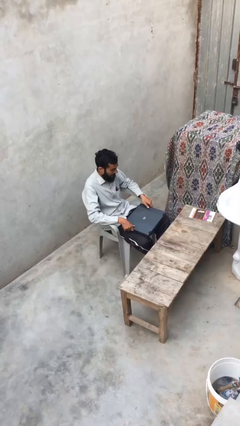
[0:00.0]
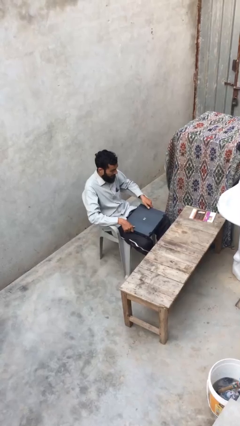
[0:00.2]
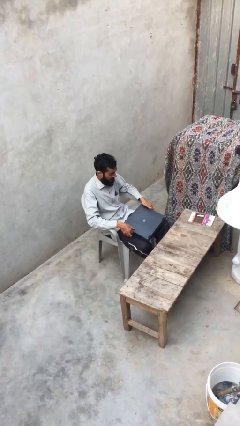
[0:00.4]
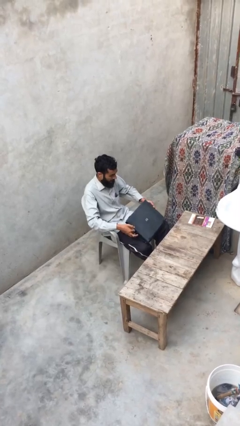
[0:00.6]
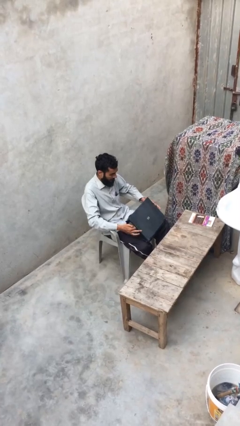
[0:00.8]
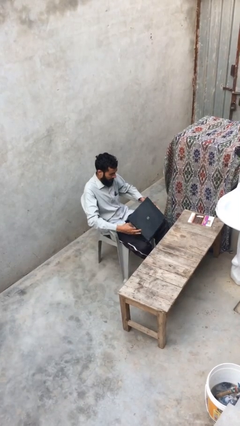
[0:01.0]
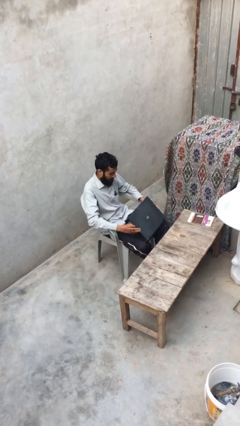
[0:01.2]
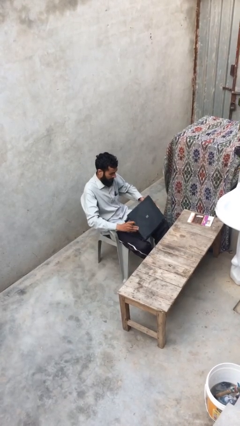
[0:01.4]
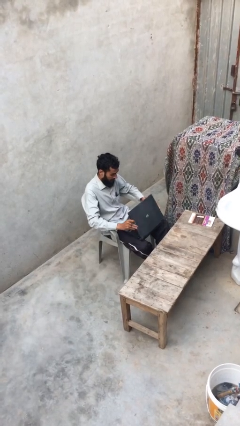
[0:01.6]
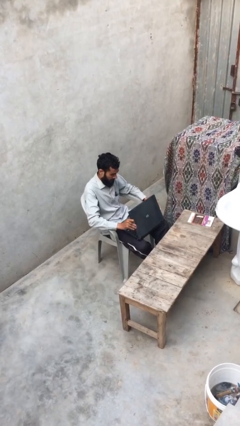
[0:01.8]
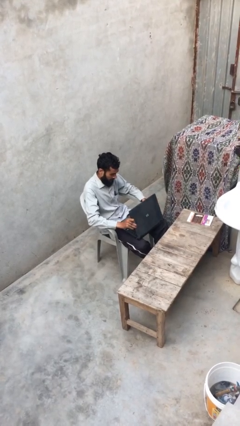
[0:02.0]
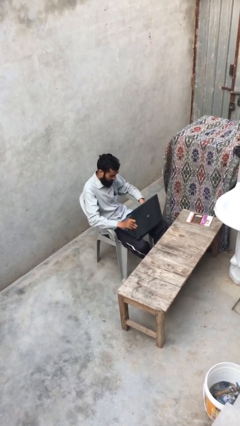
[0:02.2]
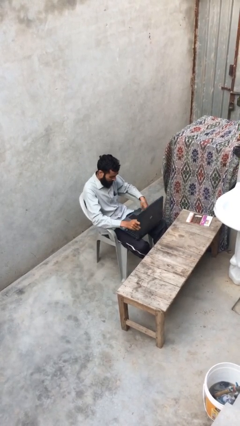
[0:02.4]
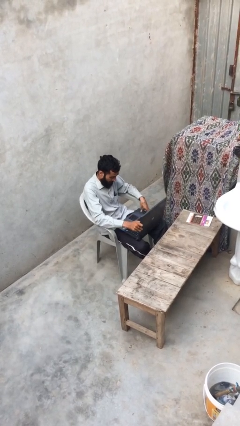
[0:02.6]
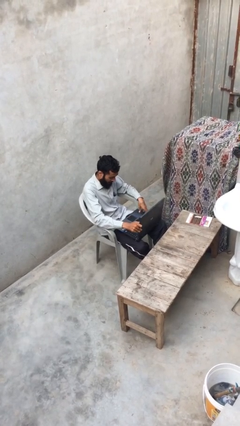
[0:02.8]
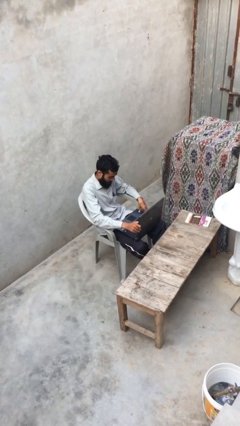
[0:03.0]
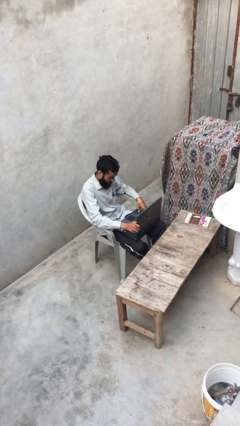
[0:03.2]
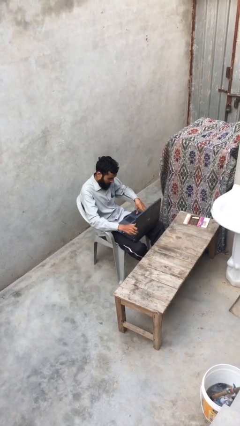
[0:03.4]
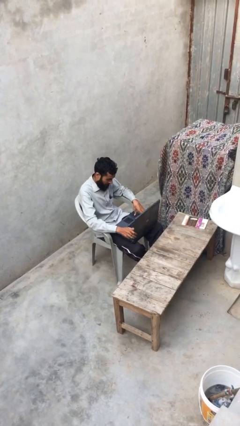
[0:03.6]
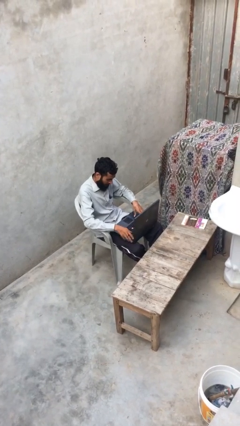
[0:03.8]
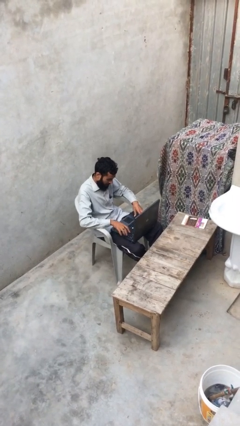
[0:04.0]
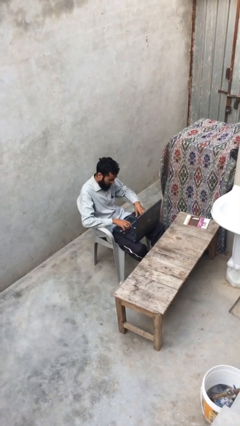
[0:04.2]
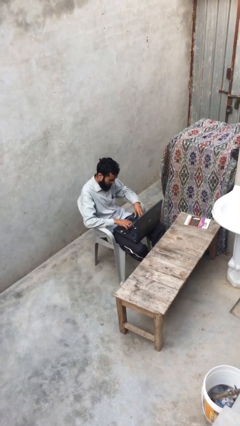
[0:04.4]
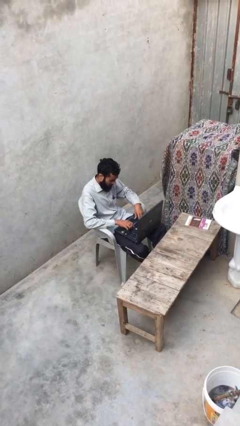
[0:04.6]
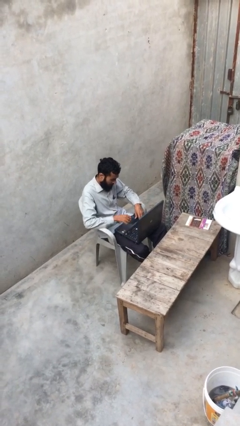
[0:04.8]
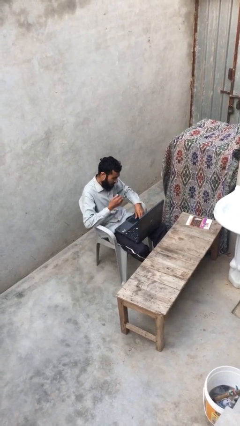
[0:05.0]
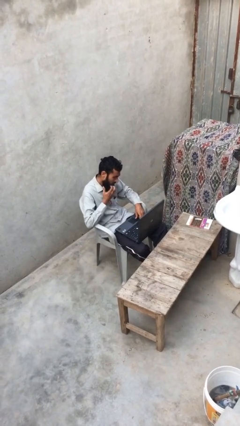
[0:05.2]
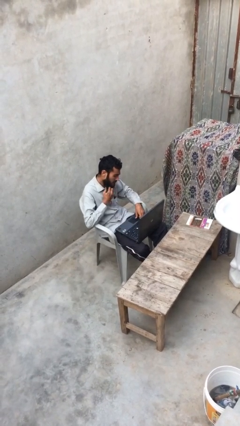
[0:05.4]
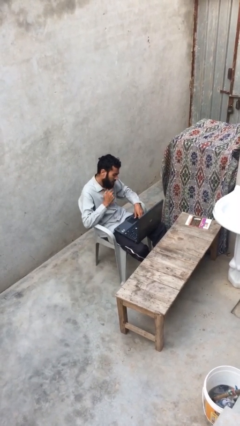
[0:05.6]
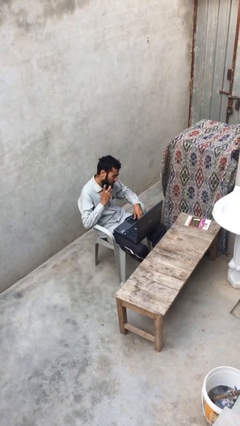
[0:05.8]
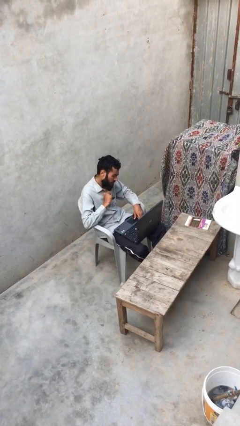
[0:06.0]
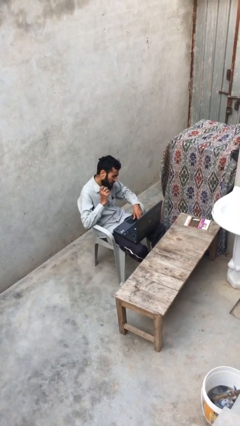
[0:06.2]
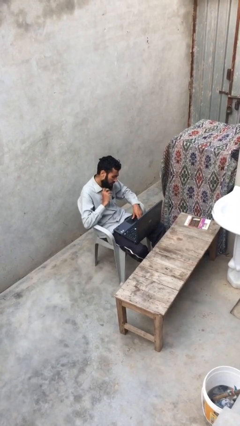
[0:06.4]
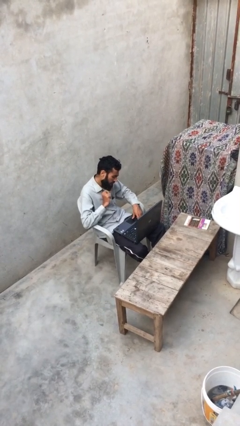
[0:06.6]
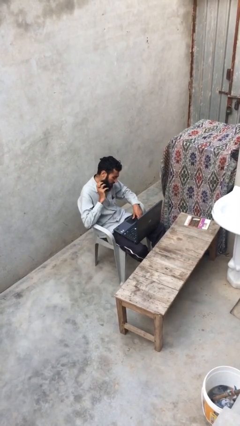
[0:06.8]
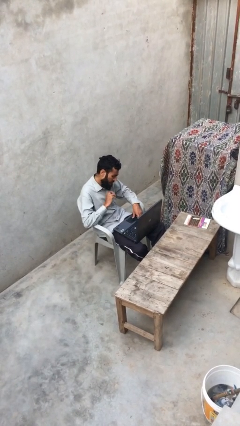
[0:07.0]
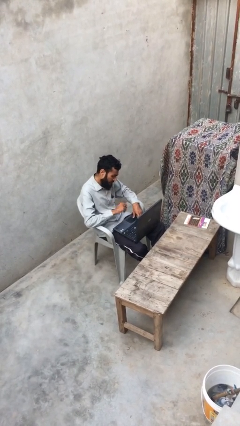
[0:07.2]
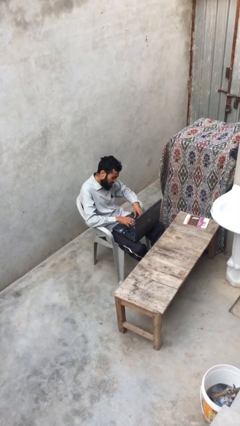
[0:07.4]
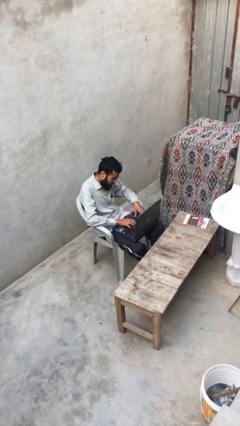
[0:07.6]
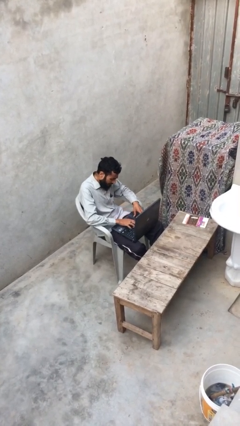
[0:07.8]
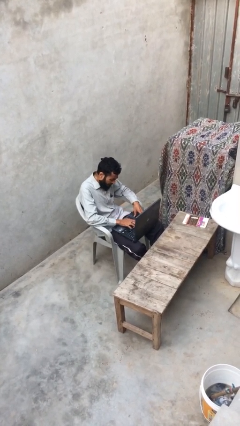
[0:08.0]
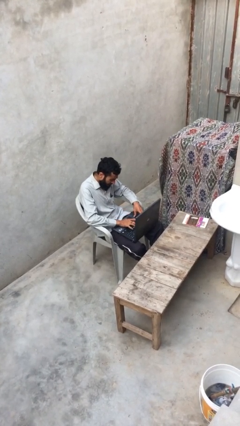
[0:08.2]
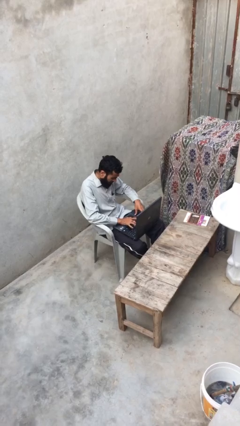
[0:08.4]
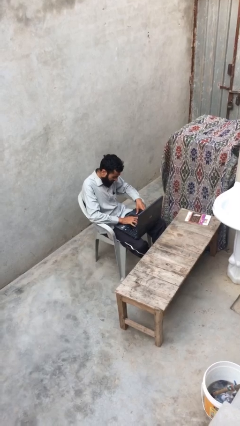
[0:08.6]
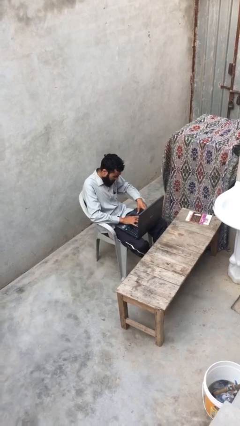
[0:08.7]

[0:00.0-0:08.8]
person interacts with laptop

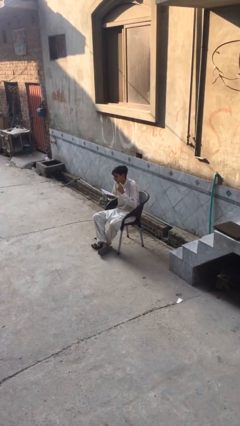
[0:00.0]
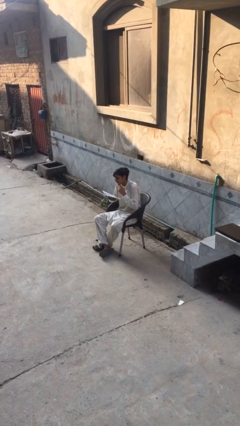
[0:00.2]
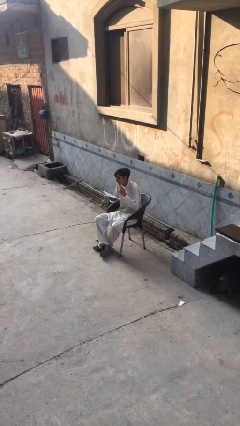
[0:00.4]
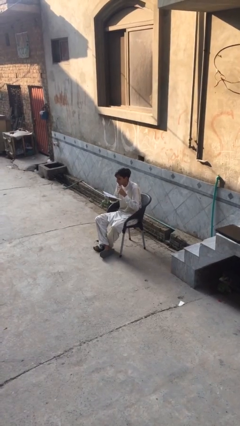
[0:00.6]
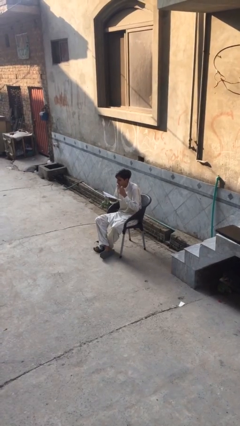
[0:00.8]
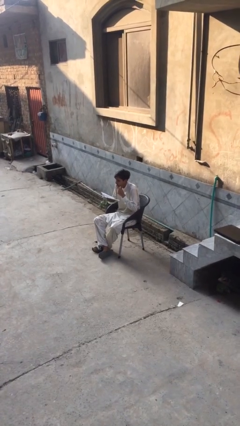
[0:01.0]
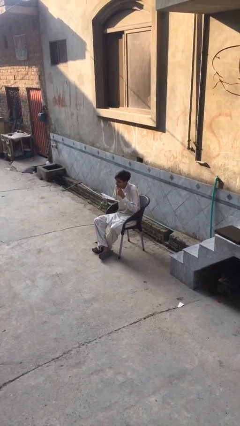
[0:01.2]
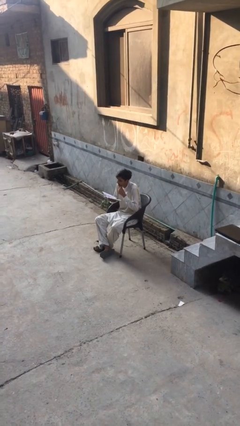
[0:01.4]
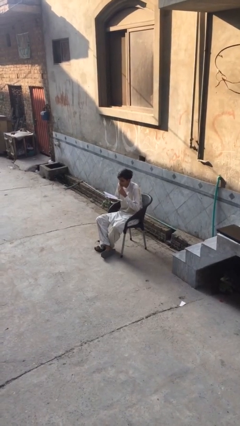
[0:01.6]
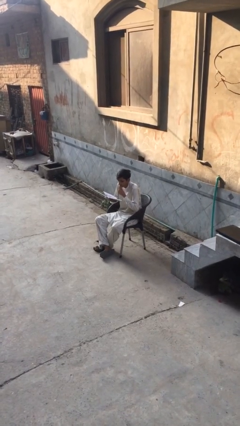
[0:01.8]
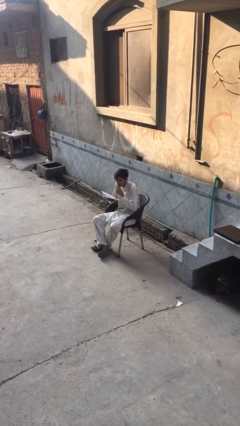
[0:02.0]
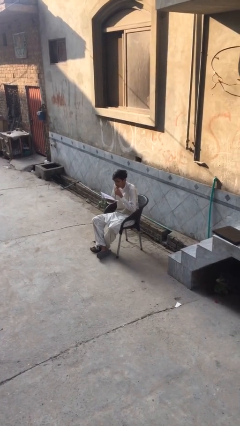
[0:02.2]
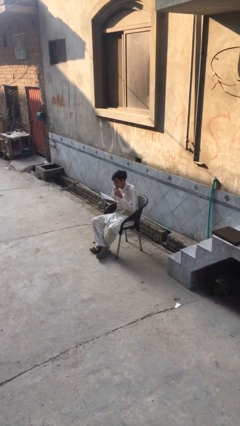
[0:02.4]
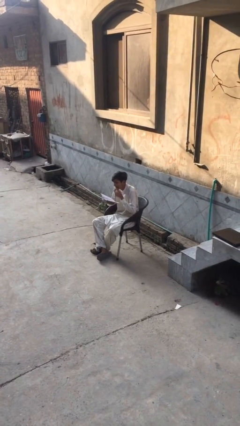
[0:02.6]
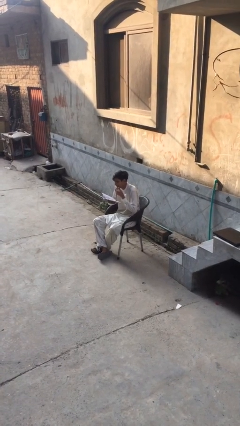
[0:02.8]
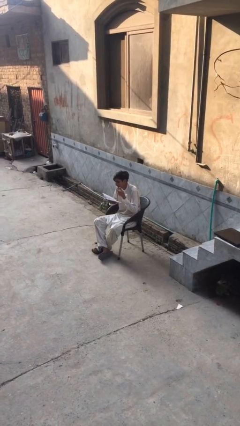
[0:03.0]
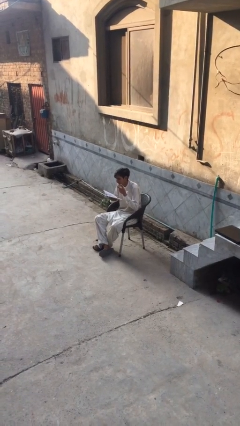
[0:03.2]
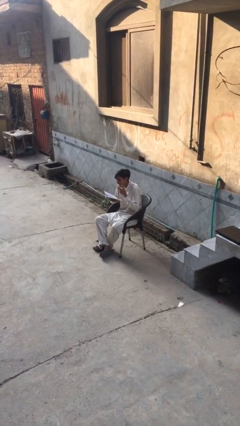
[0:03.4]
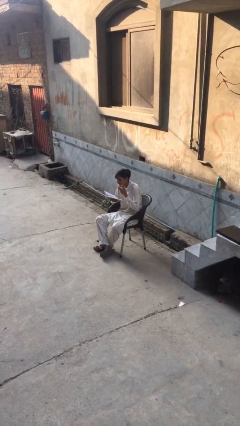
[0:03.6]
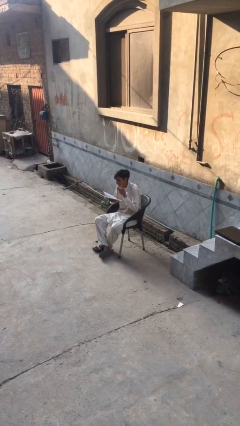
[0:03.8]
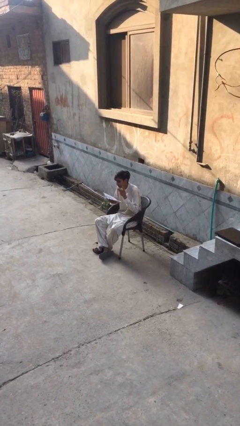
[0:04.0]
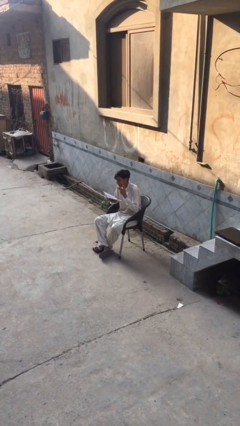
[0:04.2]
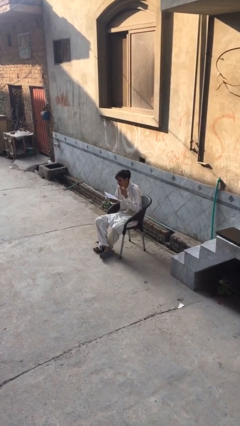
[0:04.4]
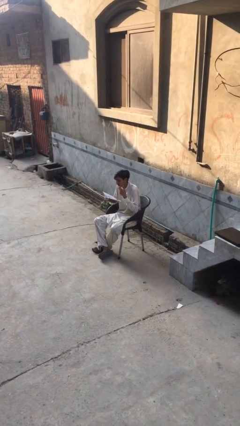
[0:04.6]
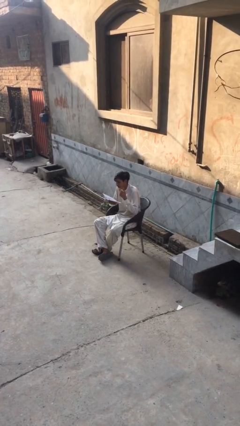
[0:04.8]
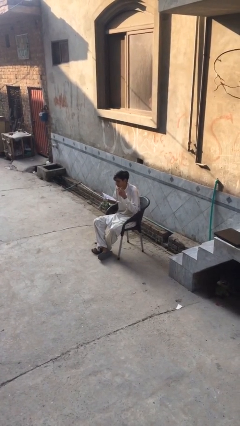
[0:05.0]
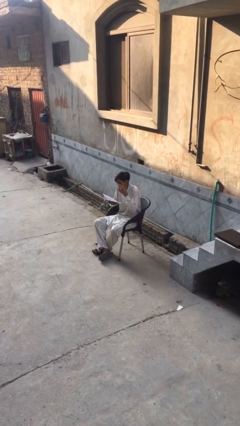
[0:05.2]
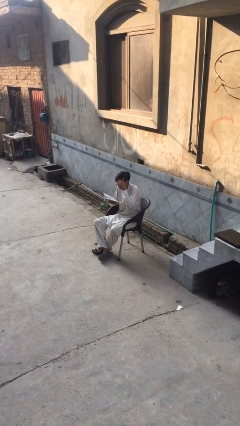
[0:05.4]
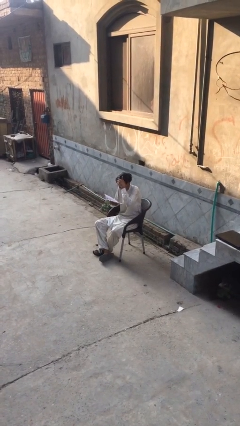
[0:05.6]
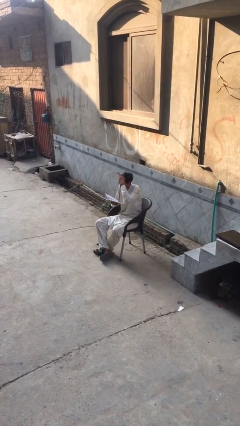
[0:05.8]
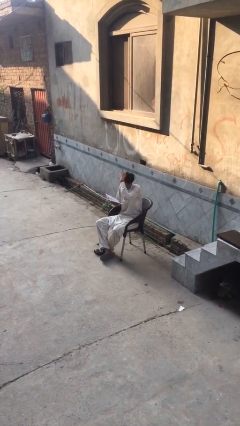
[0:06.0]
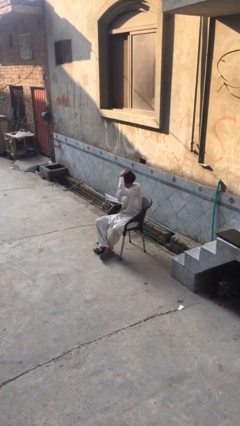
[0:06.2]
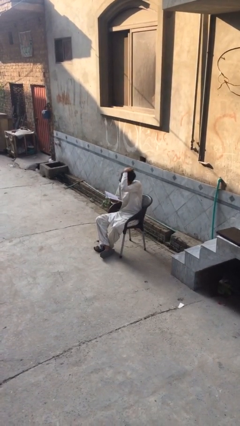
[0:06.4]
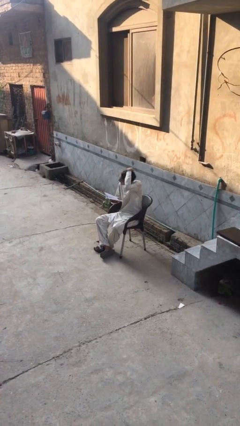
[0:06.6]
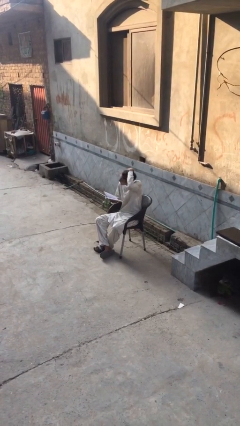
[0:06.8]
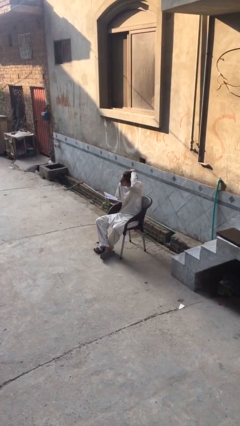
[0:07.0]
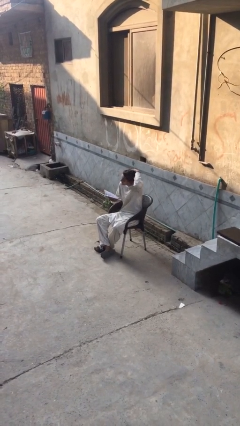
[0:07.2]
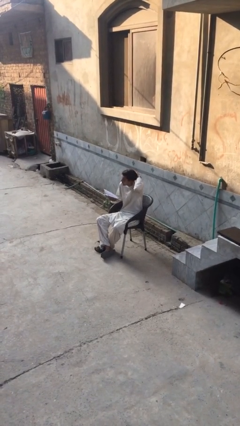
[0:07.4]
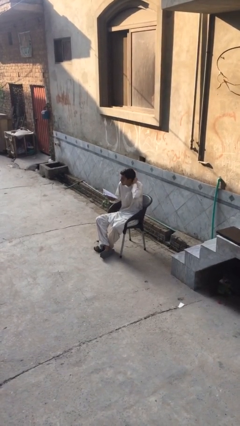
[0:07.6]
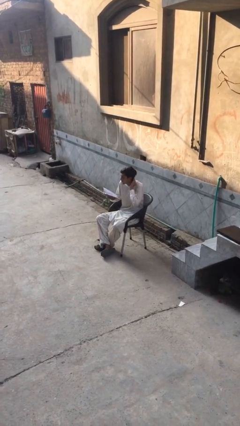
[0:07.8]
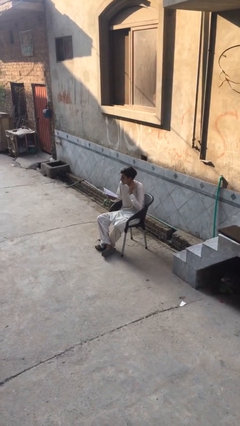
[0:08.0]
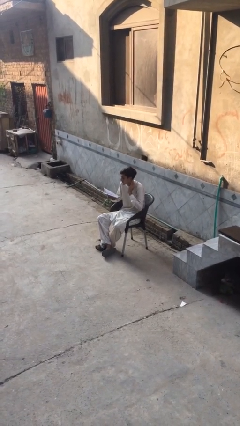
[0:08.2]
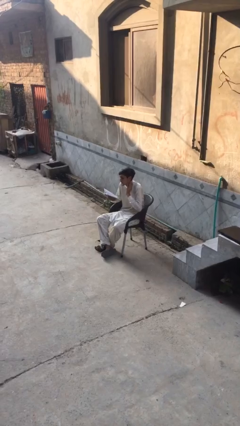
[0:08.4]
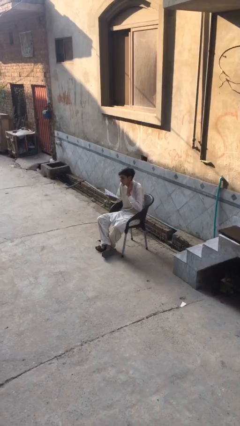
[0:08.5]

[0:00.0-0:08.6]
person reads document

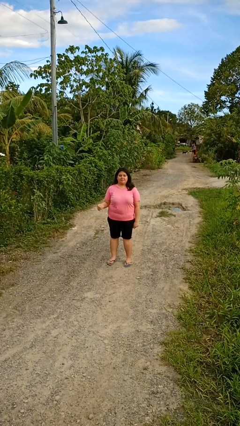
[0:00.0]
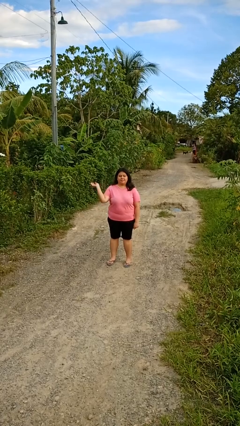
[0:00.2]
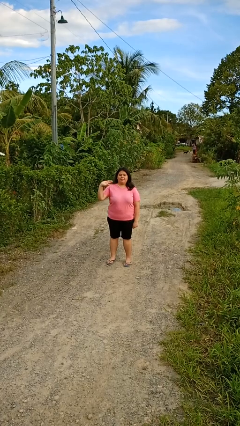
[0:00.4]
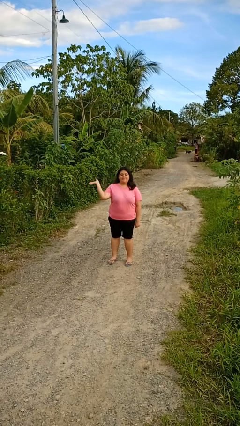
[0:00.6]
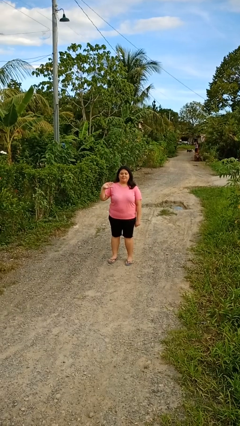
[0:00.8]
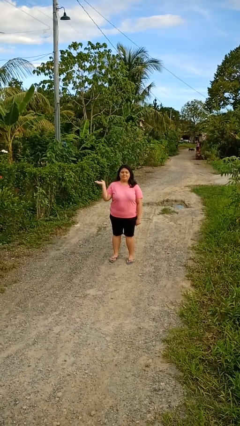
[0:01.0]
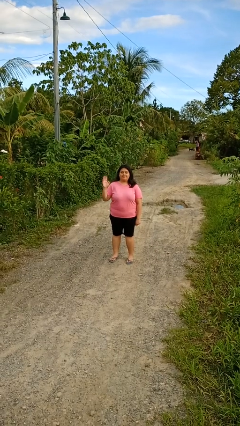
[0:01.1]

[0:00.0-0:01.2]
person waves at person
